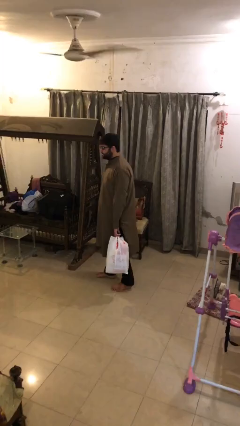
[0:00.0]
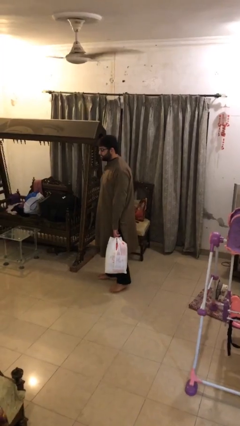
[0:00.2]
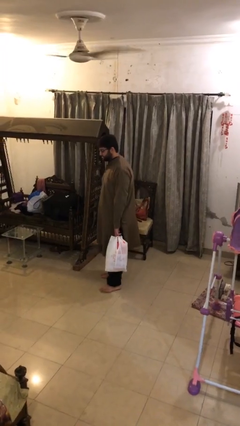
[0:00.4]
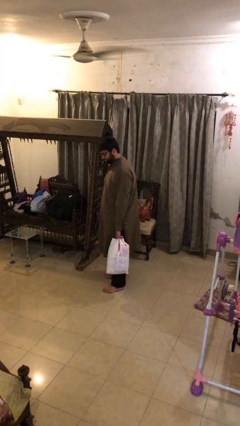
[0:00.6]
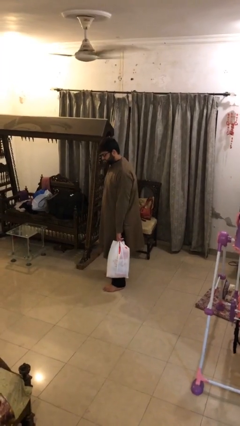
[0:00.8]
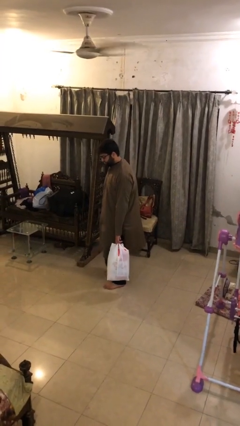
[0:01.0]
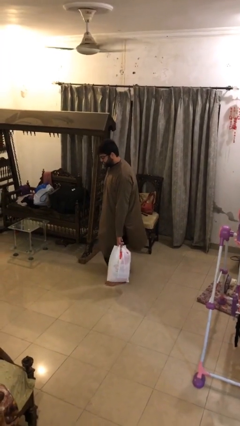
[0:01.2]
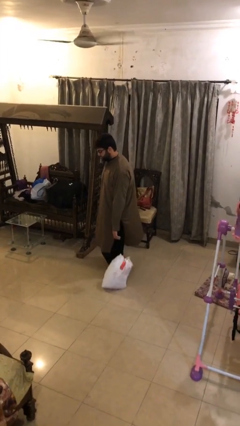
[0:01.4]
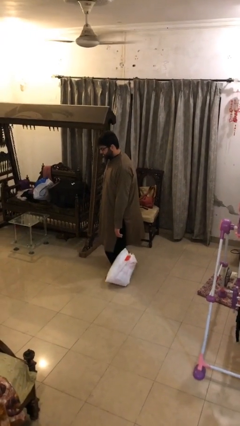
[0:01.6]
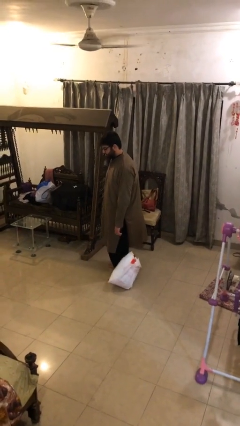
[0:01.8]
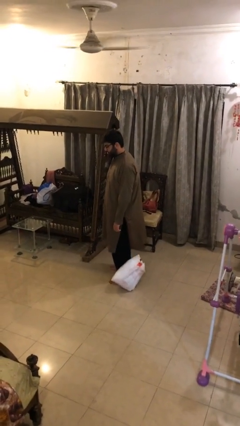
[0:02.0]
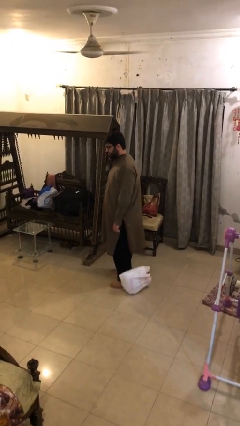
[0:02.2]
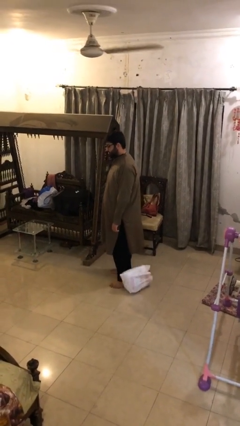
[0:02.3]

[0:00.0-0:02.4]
person puts down object on floor

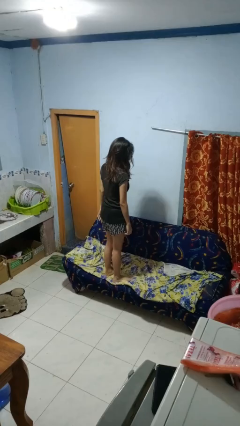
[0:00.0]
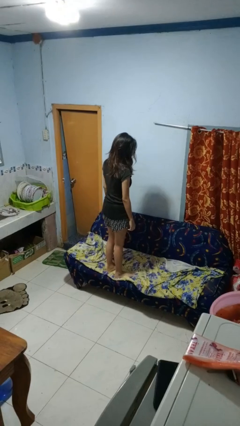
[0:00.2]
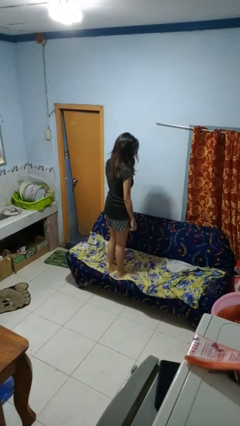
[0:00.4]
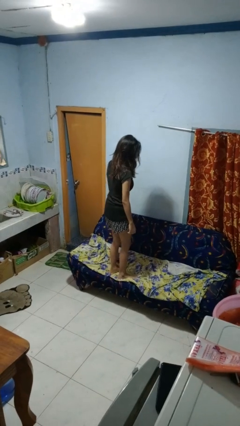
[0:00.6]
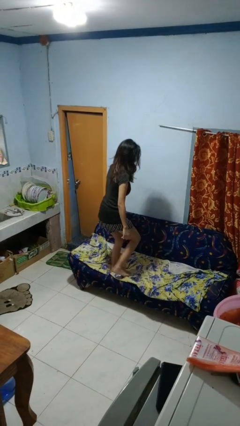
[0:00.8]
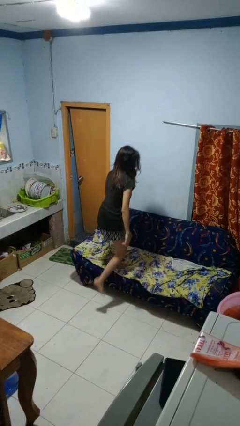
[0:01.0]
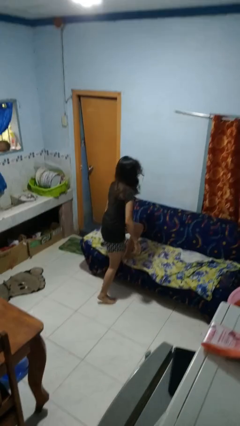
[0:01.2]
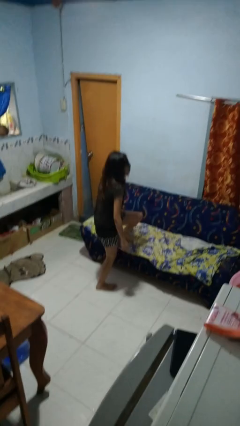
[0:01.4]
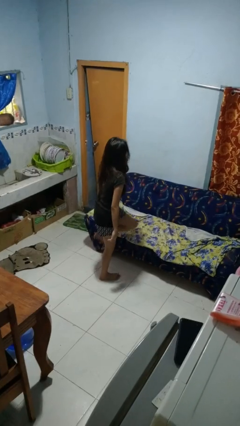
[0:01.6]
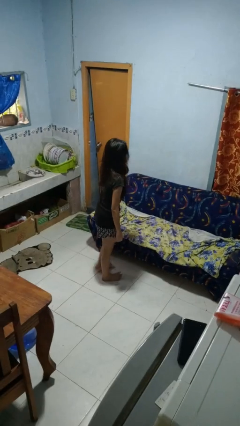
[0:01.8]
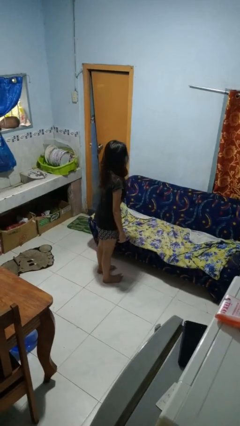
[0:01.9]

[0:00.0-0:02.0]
person climbs off couch

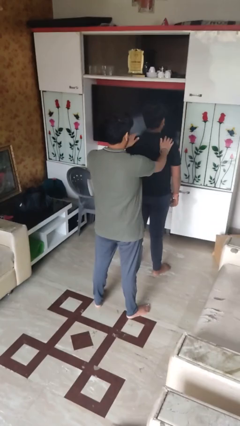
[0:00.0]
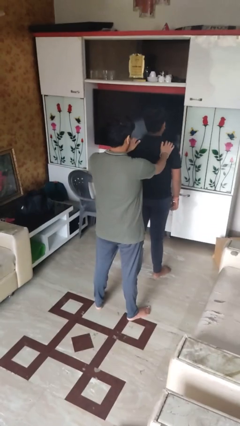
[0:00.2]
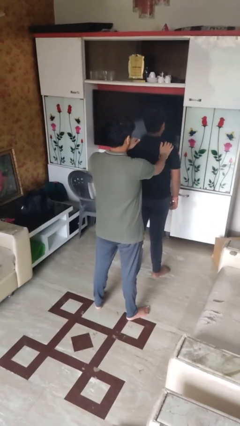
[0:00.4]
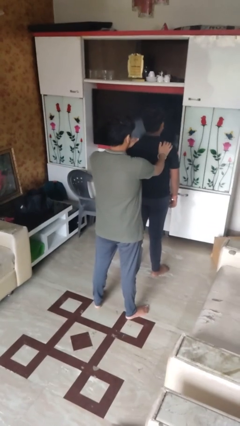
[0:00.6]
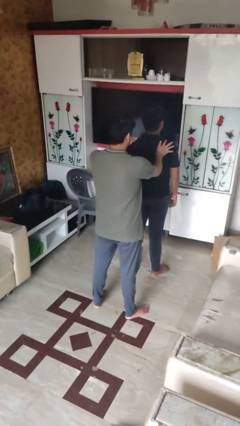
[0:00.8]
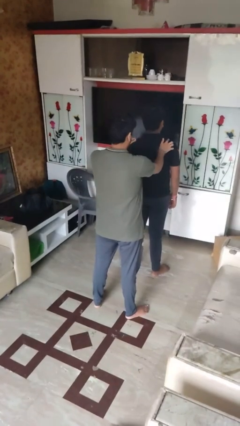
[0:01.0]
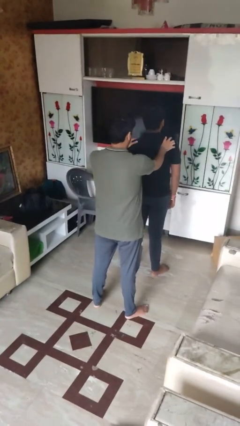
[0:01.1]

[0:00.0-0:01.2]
person grabs person by shoulder

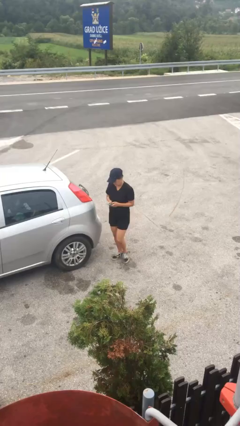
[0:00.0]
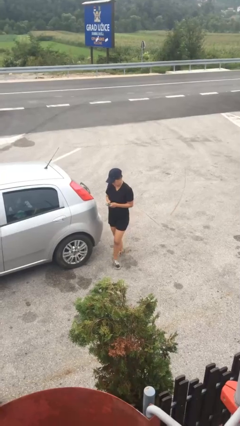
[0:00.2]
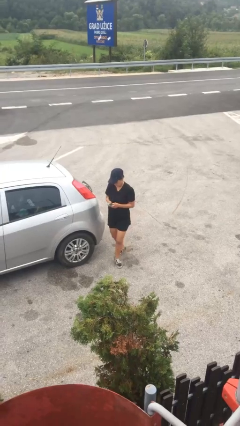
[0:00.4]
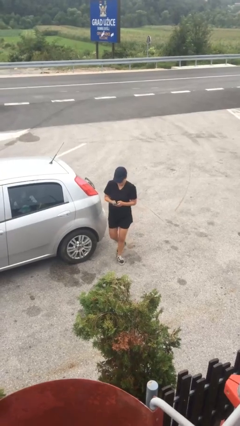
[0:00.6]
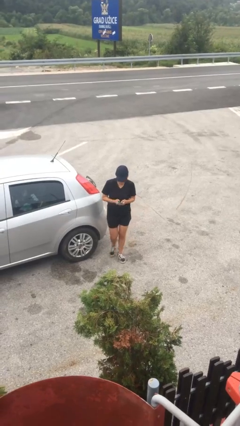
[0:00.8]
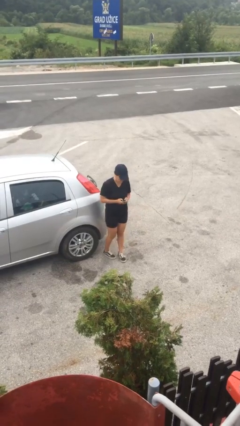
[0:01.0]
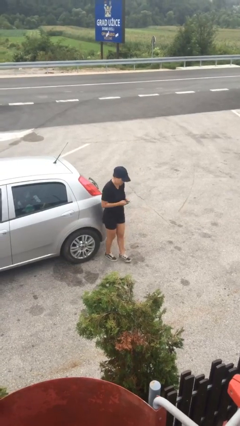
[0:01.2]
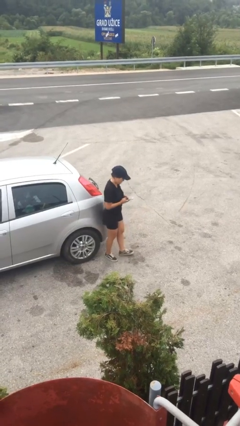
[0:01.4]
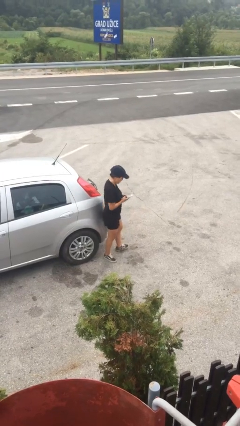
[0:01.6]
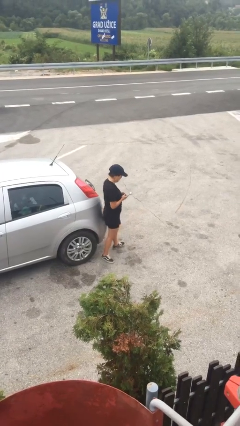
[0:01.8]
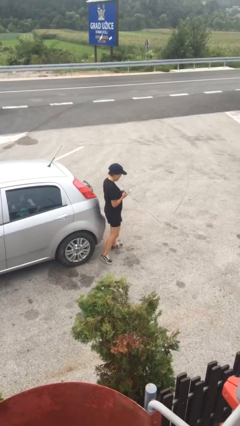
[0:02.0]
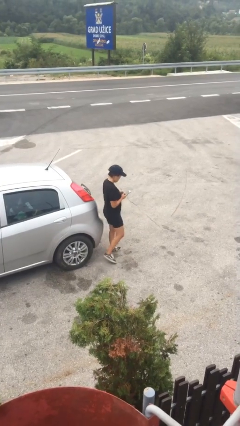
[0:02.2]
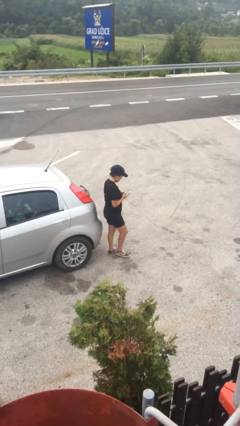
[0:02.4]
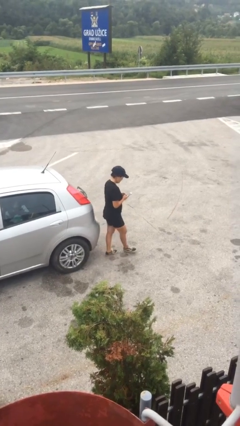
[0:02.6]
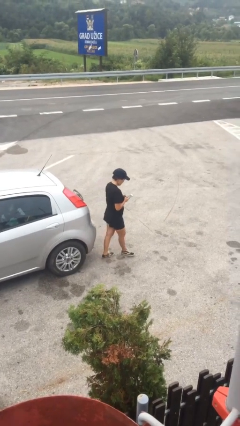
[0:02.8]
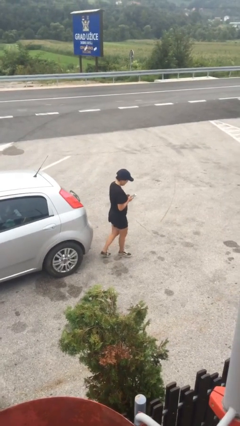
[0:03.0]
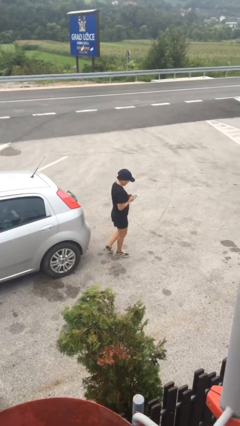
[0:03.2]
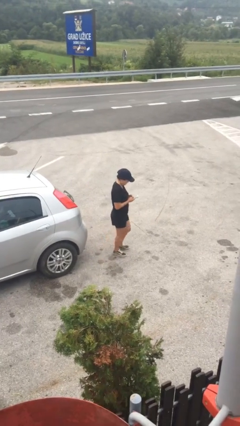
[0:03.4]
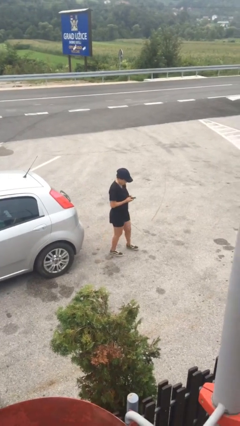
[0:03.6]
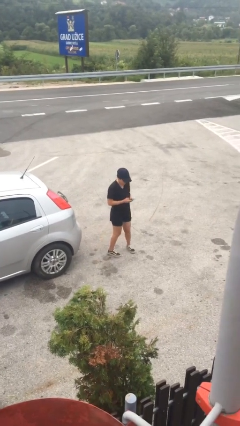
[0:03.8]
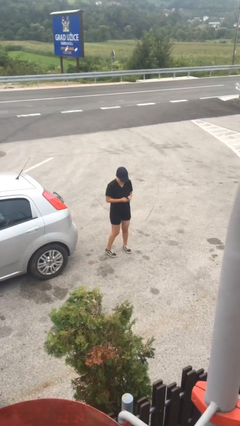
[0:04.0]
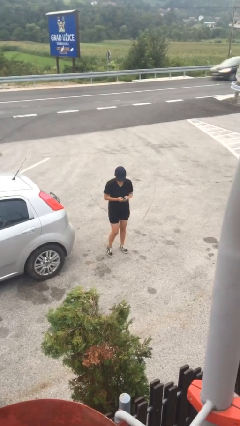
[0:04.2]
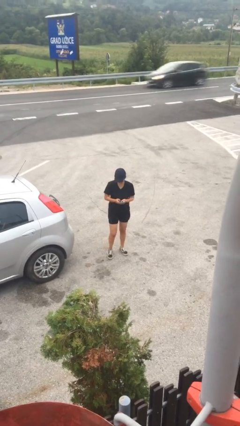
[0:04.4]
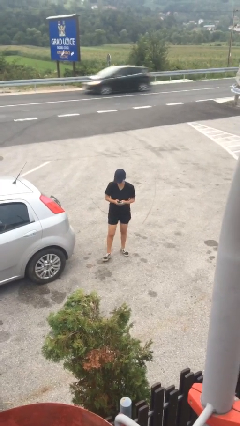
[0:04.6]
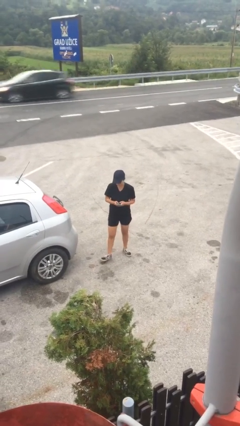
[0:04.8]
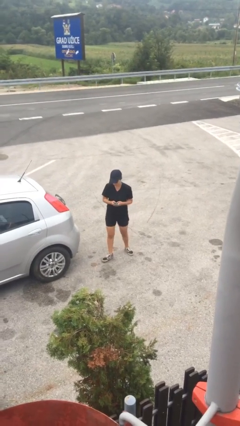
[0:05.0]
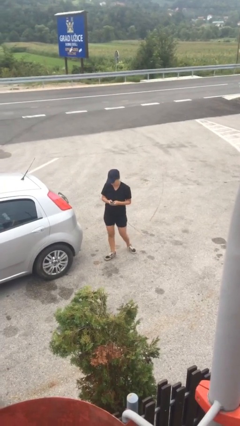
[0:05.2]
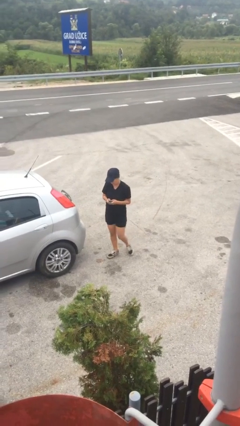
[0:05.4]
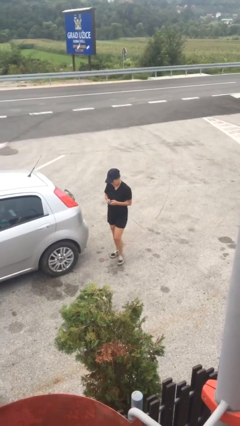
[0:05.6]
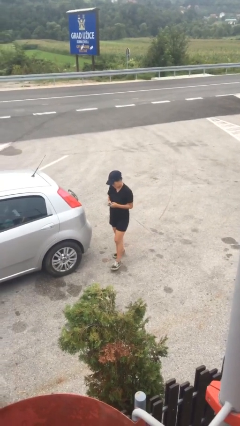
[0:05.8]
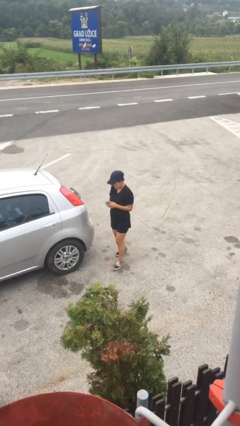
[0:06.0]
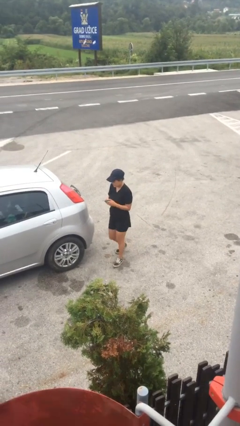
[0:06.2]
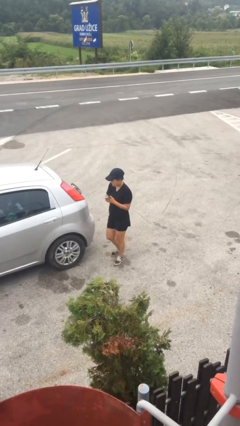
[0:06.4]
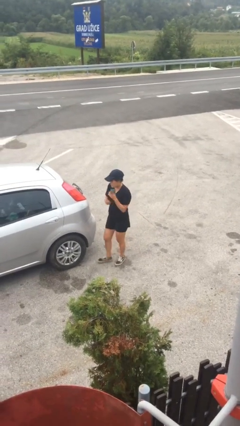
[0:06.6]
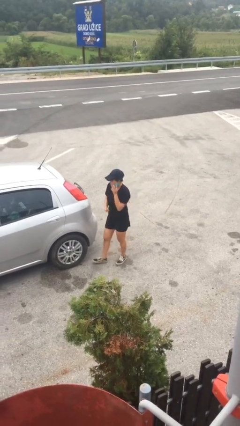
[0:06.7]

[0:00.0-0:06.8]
person texts on phone

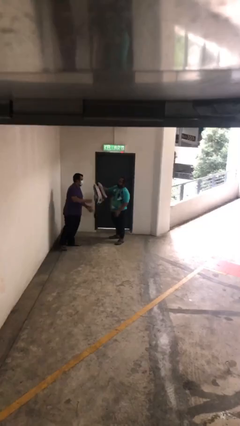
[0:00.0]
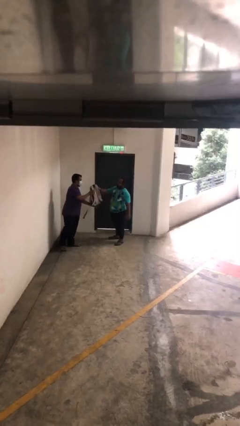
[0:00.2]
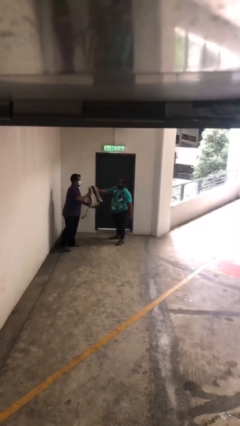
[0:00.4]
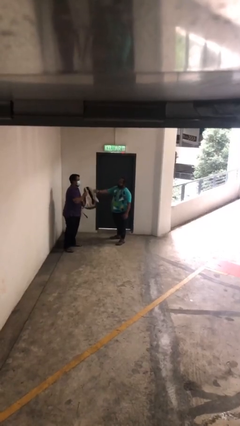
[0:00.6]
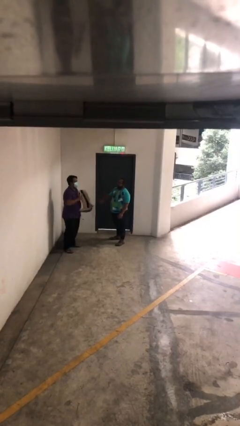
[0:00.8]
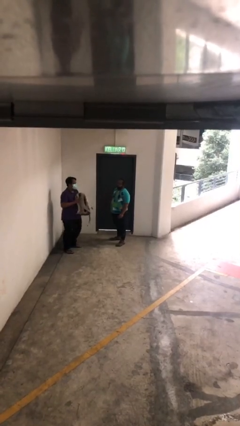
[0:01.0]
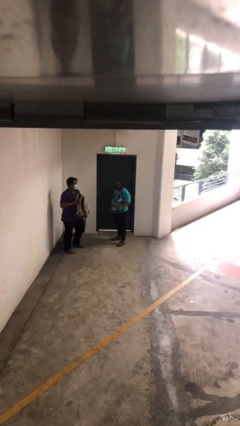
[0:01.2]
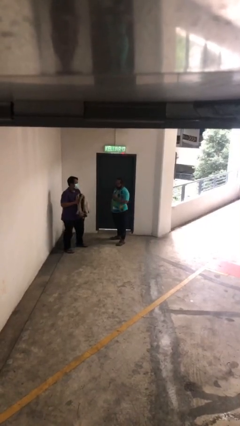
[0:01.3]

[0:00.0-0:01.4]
person transfers object to person

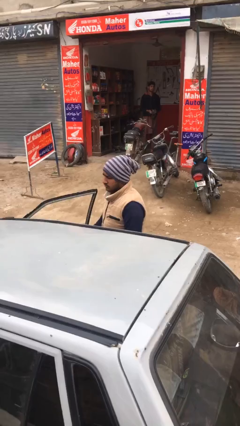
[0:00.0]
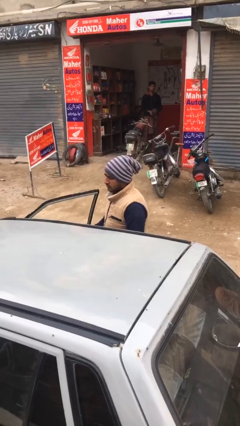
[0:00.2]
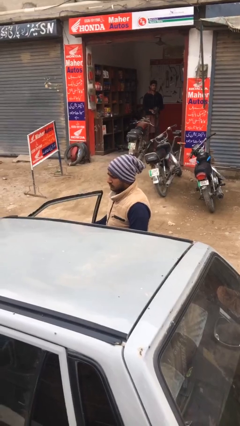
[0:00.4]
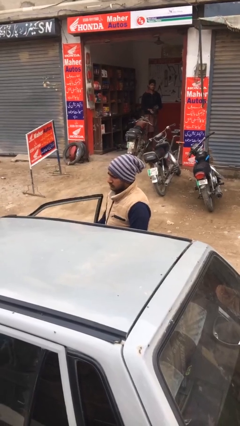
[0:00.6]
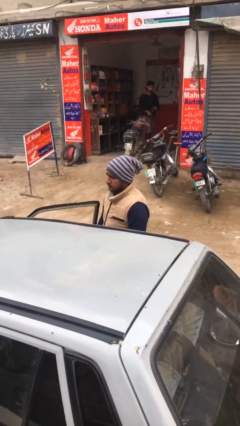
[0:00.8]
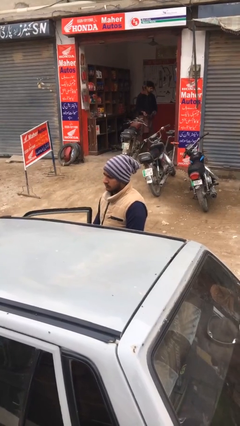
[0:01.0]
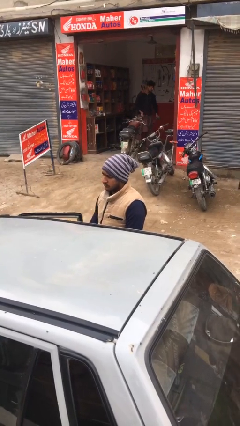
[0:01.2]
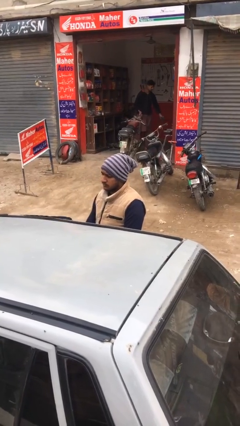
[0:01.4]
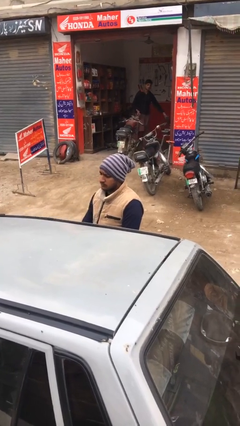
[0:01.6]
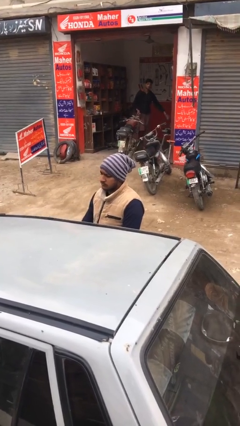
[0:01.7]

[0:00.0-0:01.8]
person closes car door

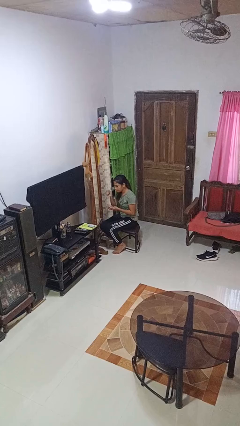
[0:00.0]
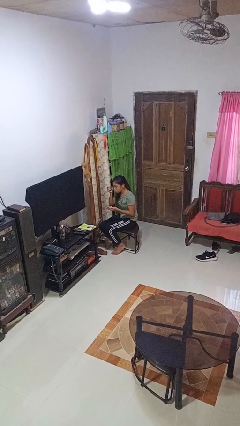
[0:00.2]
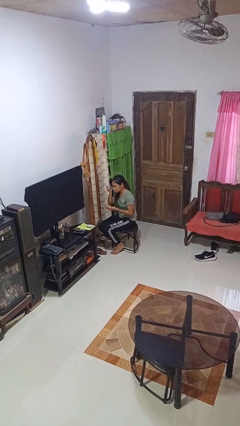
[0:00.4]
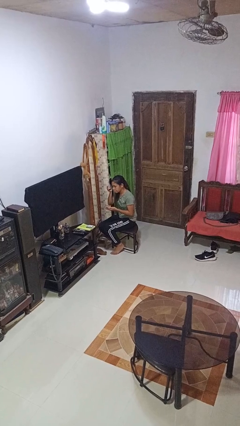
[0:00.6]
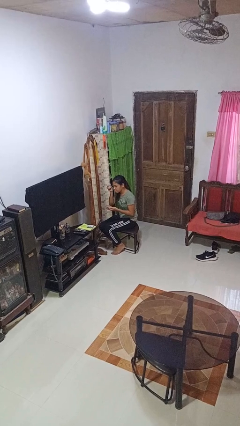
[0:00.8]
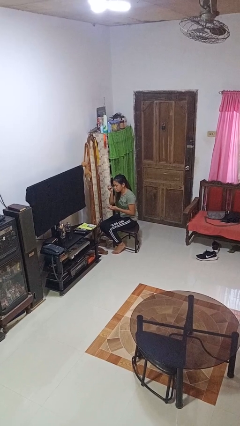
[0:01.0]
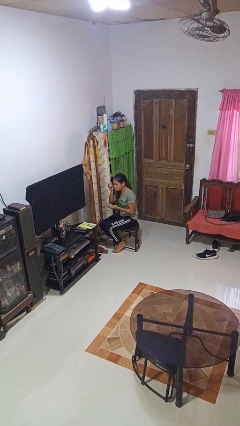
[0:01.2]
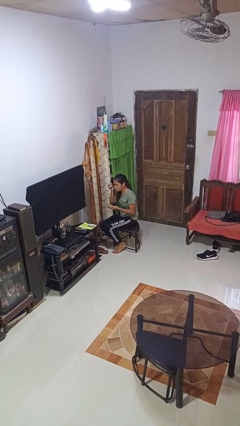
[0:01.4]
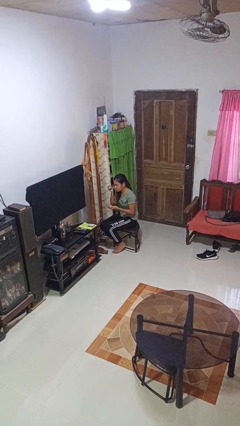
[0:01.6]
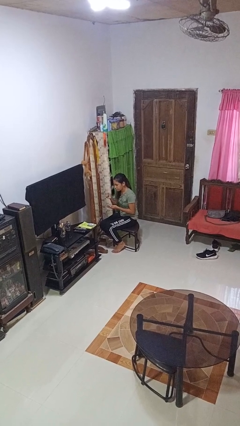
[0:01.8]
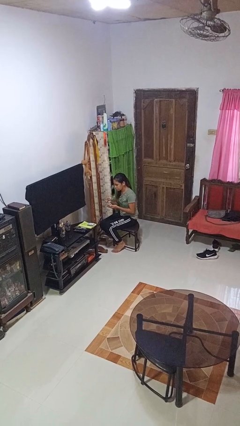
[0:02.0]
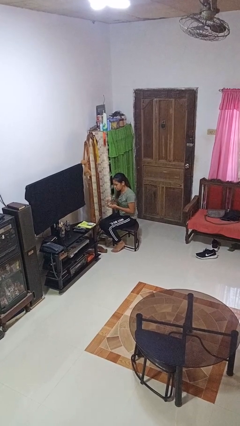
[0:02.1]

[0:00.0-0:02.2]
person applies eye makeup
